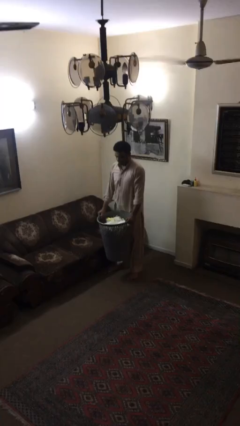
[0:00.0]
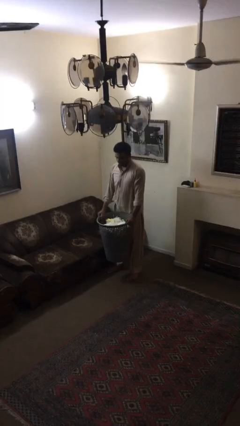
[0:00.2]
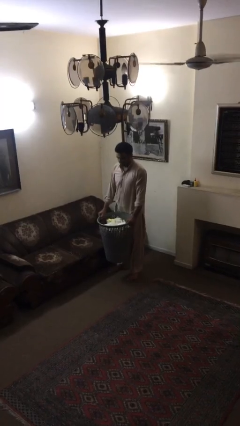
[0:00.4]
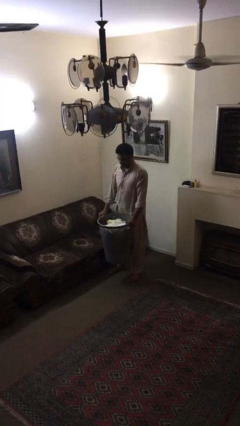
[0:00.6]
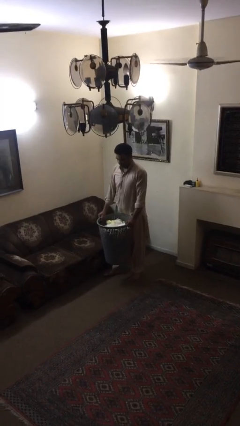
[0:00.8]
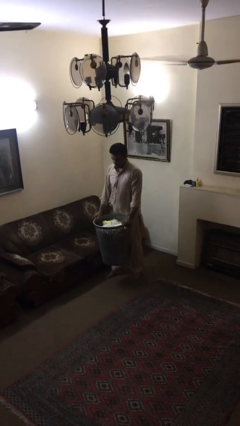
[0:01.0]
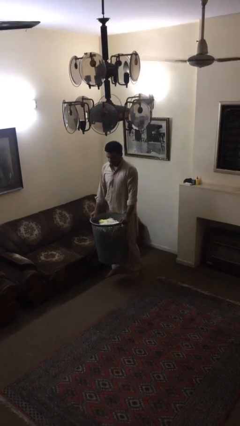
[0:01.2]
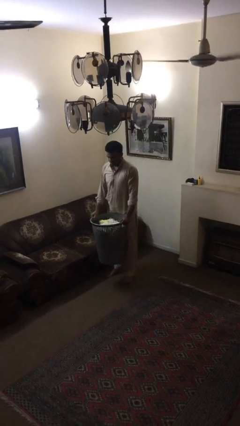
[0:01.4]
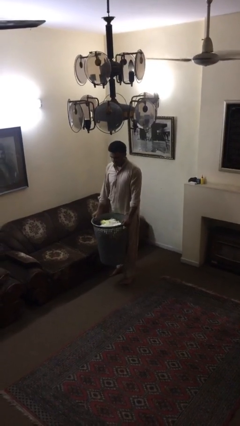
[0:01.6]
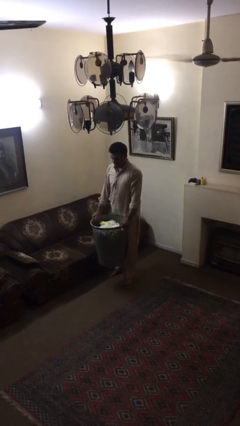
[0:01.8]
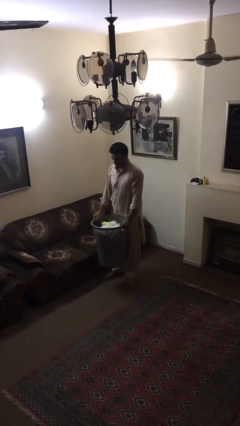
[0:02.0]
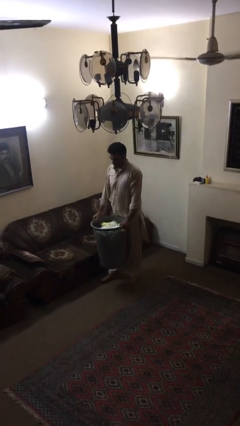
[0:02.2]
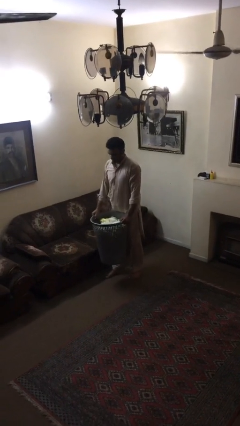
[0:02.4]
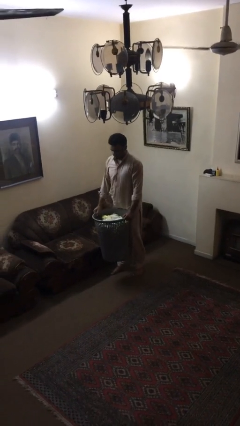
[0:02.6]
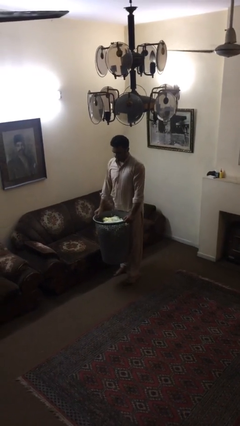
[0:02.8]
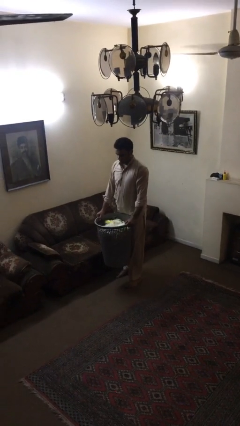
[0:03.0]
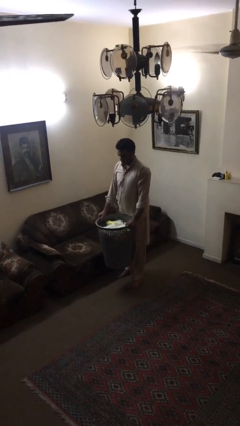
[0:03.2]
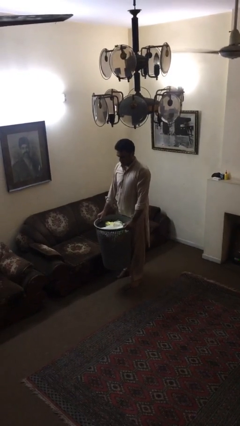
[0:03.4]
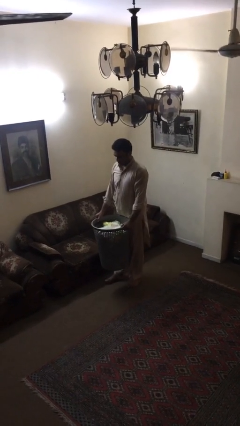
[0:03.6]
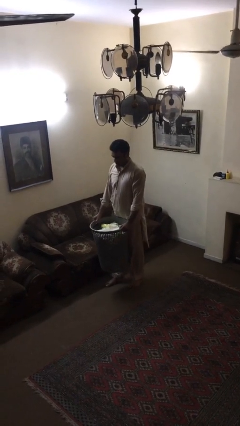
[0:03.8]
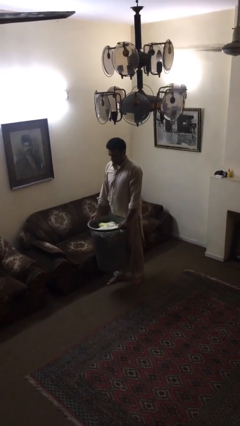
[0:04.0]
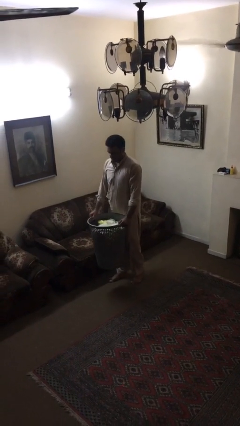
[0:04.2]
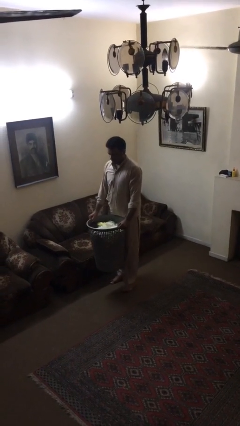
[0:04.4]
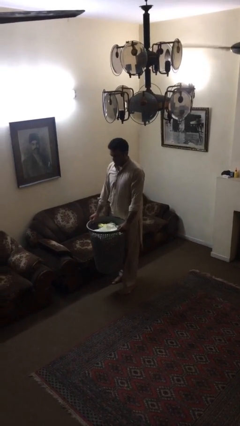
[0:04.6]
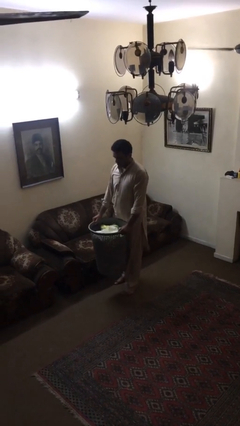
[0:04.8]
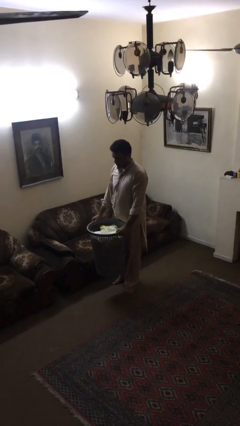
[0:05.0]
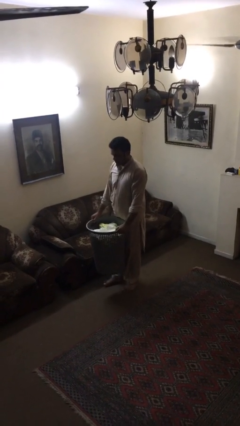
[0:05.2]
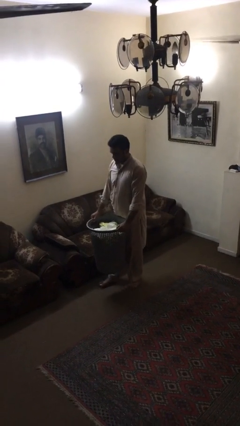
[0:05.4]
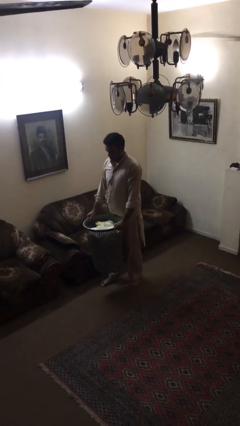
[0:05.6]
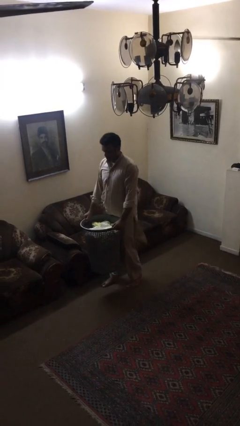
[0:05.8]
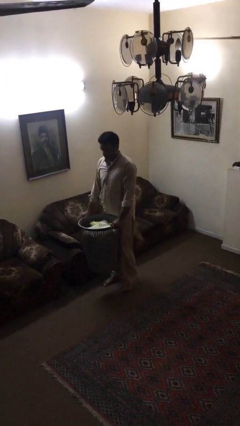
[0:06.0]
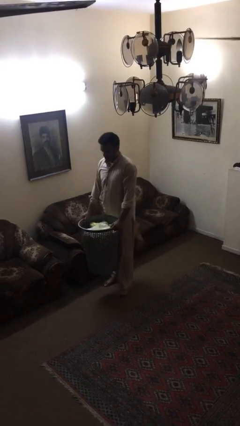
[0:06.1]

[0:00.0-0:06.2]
person carries heavy object

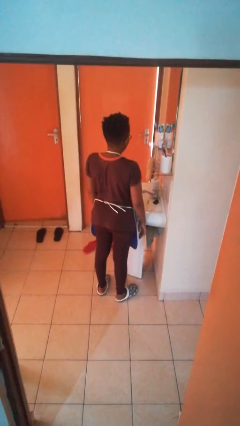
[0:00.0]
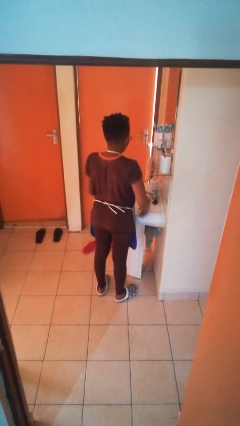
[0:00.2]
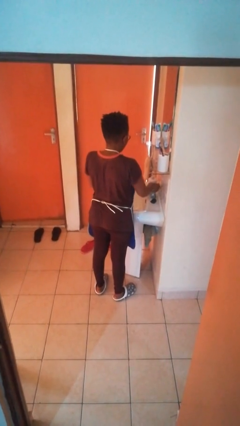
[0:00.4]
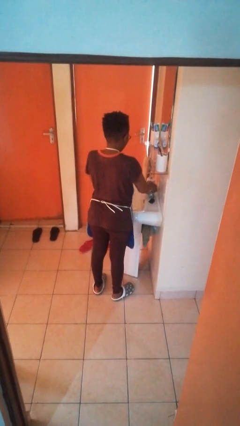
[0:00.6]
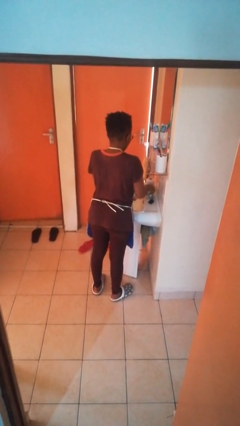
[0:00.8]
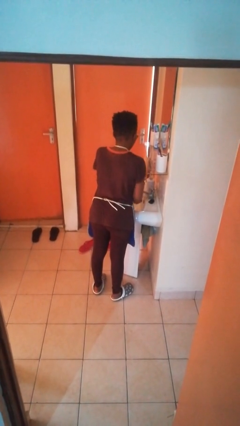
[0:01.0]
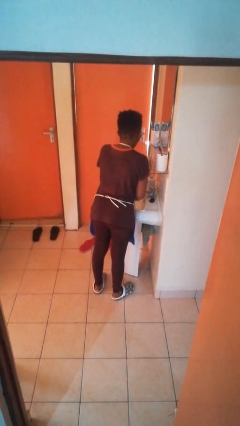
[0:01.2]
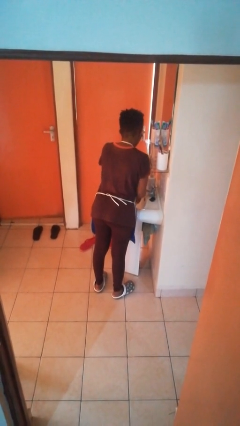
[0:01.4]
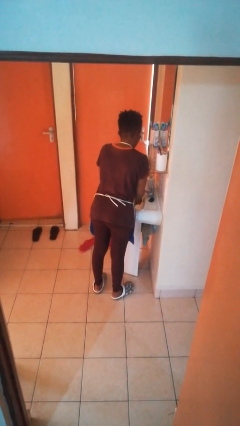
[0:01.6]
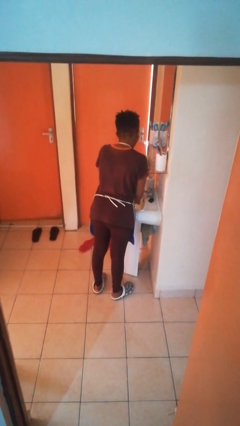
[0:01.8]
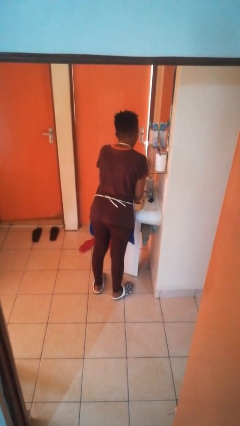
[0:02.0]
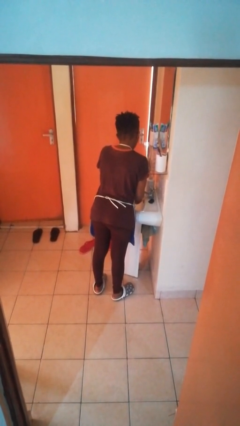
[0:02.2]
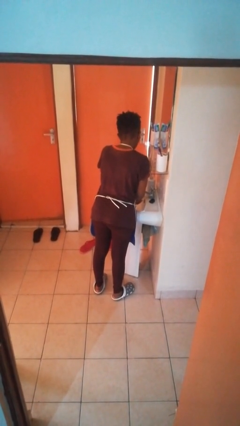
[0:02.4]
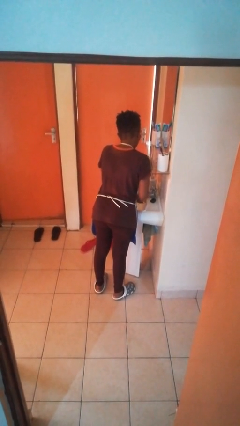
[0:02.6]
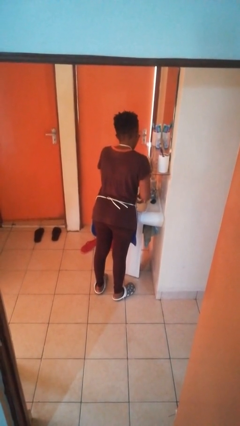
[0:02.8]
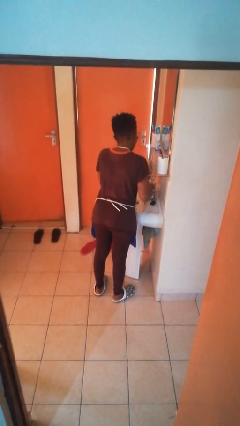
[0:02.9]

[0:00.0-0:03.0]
person washes hands

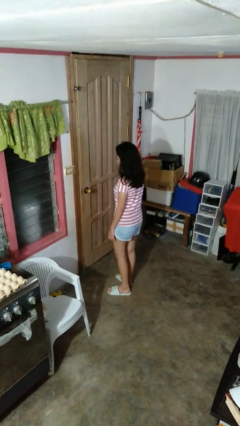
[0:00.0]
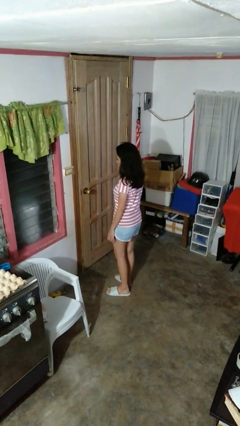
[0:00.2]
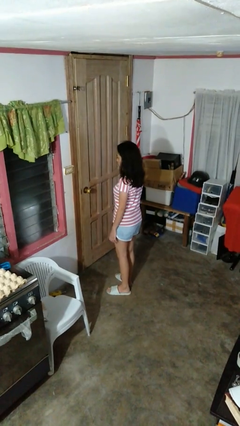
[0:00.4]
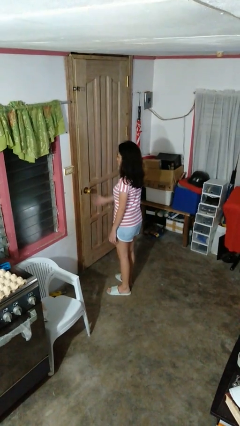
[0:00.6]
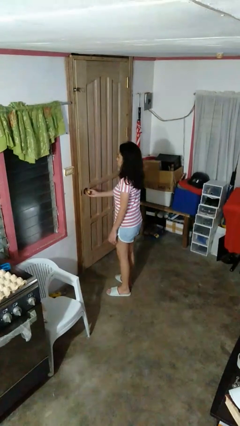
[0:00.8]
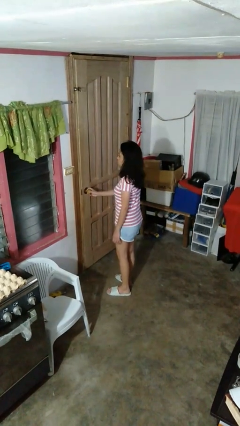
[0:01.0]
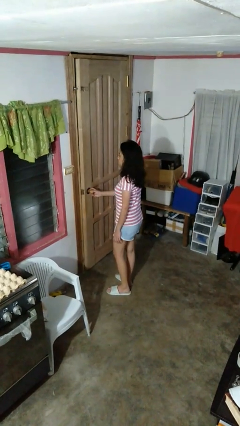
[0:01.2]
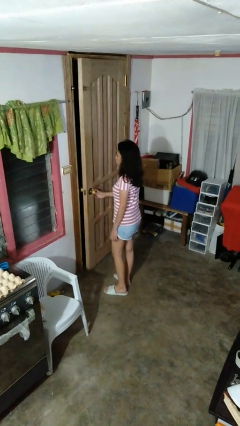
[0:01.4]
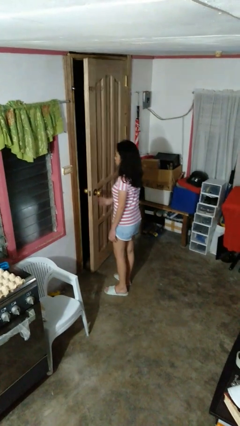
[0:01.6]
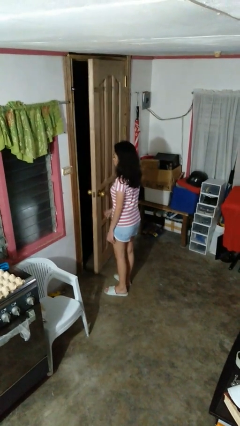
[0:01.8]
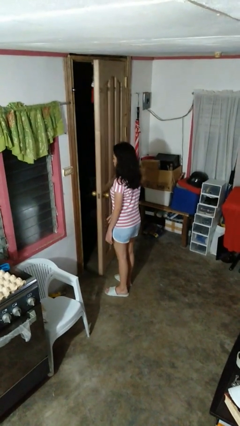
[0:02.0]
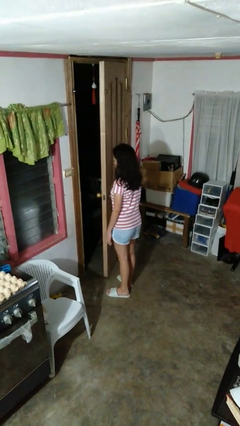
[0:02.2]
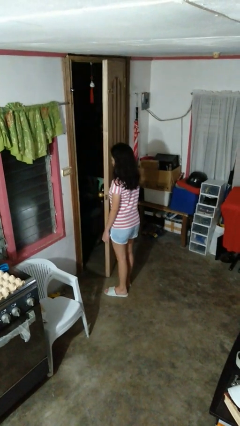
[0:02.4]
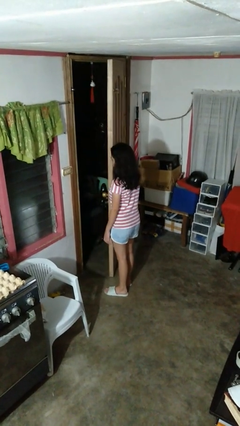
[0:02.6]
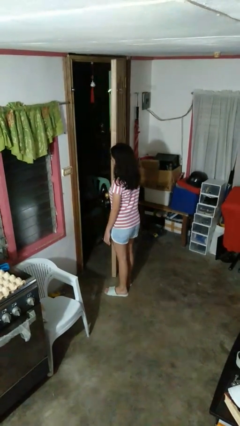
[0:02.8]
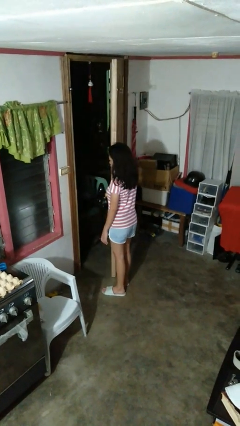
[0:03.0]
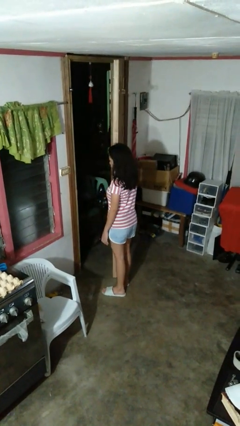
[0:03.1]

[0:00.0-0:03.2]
person opens facility door

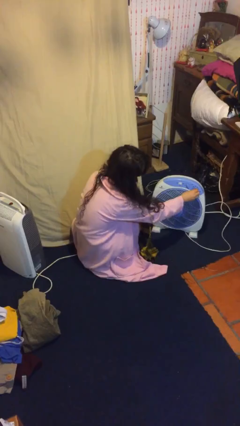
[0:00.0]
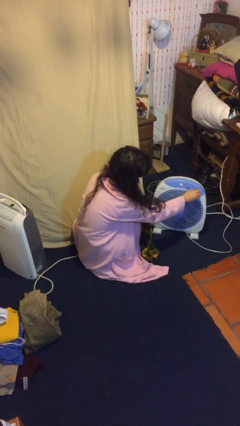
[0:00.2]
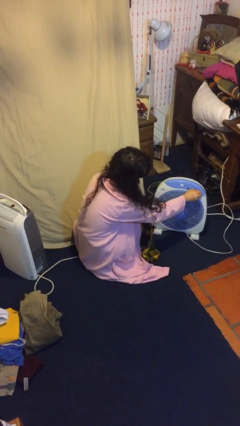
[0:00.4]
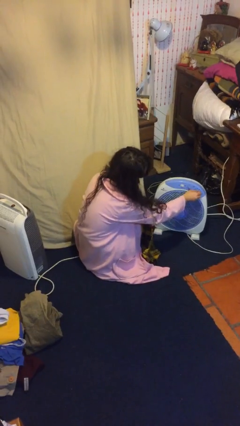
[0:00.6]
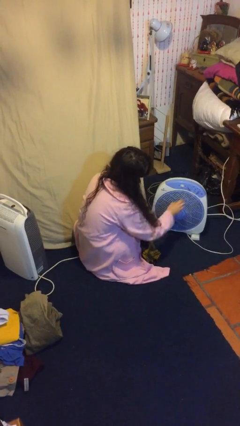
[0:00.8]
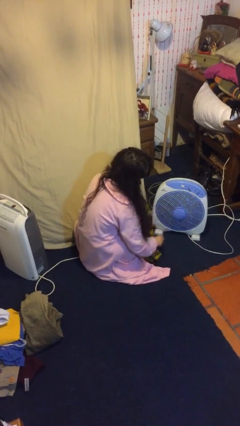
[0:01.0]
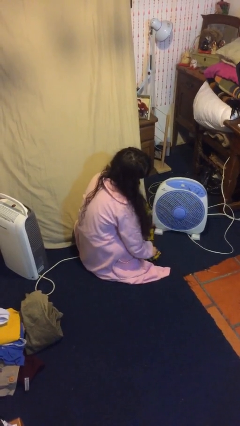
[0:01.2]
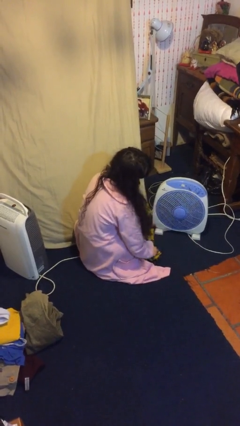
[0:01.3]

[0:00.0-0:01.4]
person turns off fan

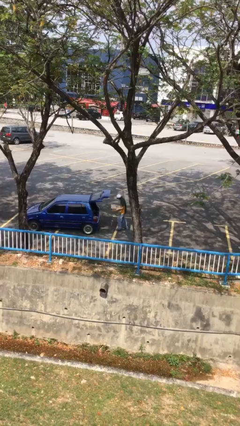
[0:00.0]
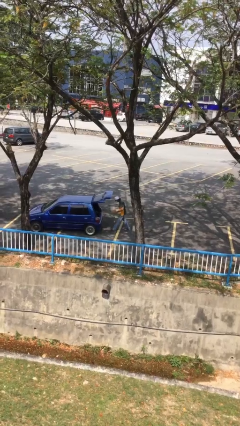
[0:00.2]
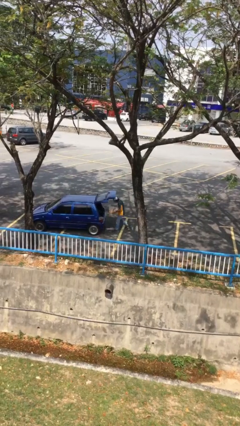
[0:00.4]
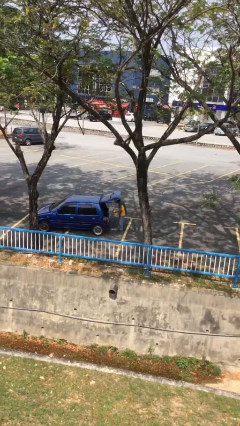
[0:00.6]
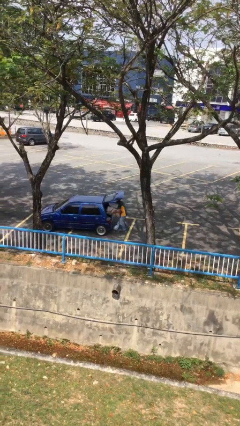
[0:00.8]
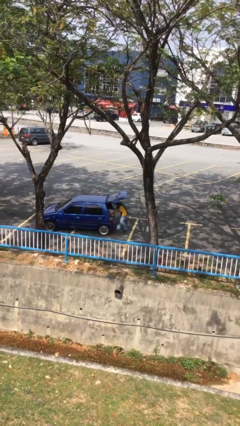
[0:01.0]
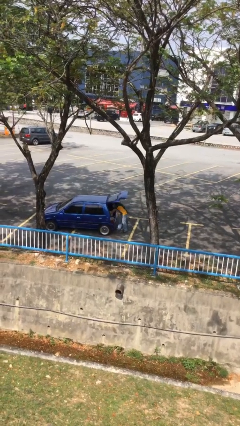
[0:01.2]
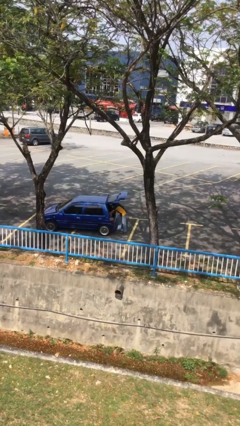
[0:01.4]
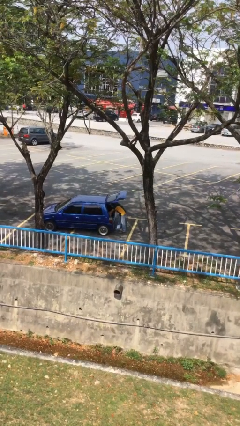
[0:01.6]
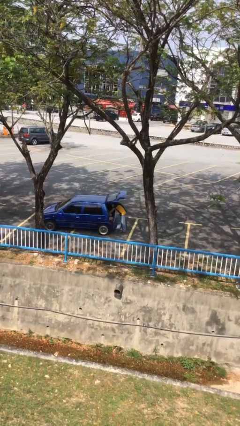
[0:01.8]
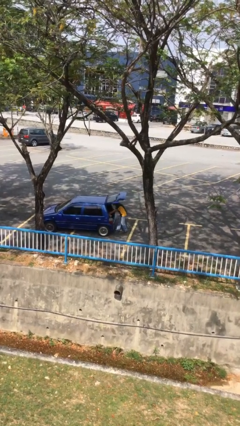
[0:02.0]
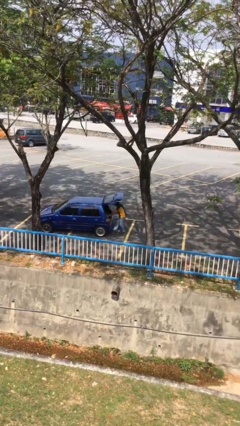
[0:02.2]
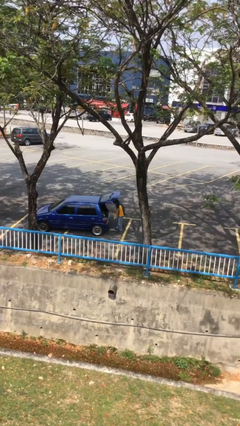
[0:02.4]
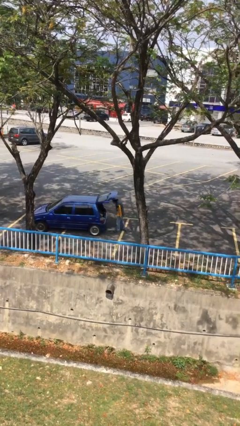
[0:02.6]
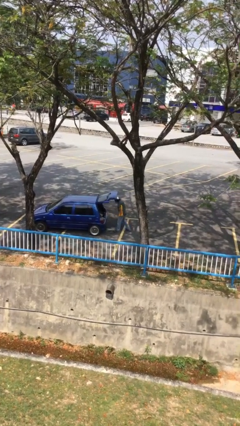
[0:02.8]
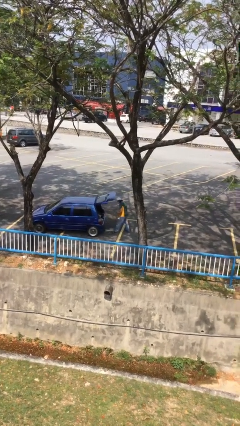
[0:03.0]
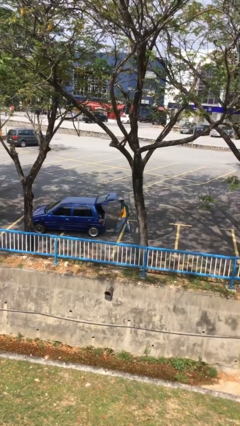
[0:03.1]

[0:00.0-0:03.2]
person loads car

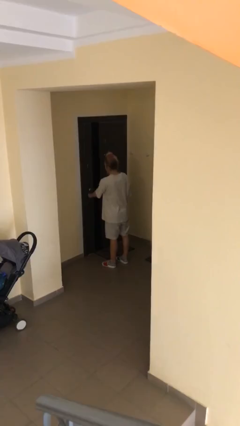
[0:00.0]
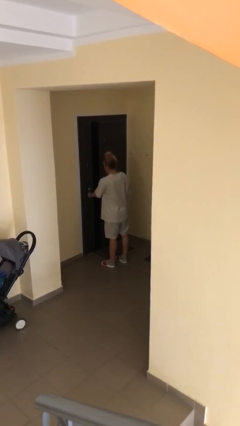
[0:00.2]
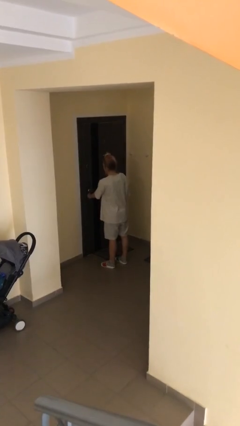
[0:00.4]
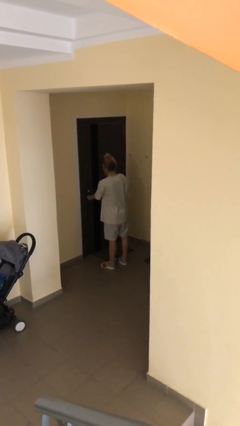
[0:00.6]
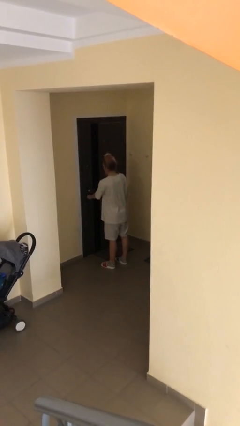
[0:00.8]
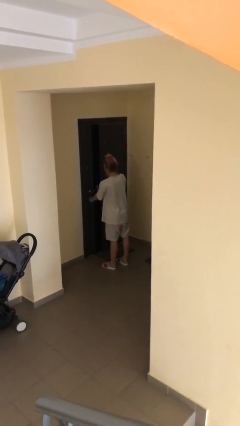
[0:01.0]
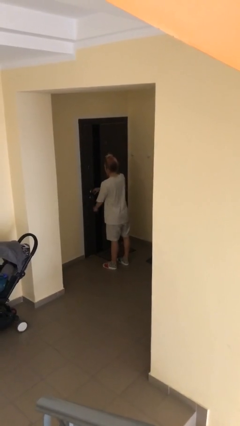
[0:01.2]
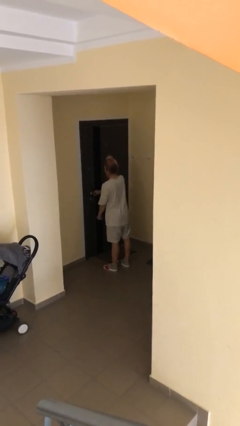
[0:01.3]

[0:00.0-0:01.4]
person unlocks door with keys
